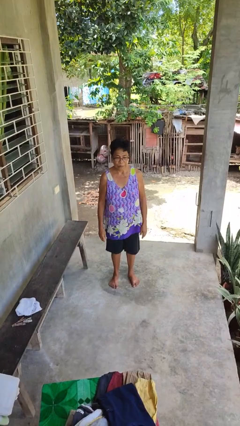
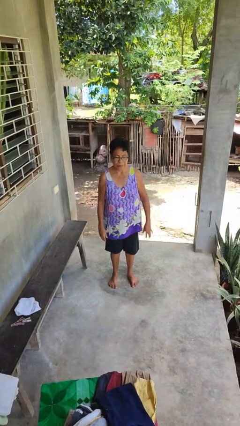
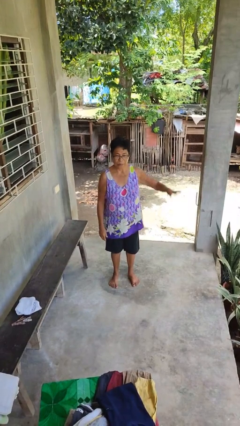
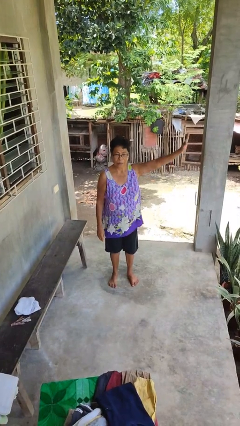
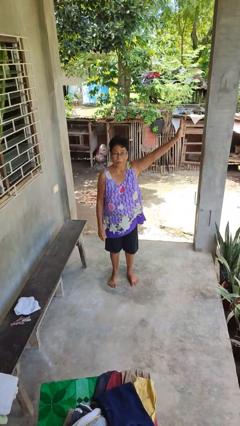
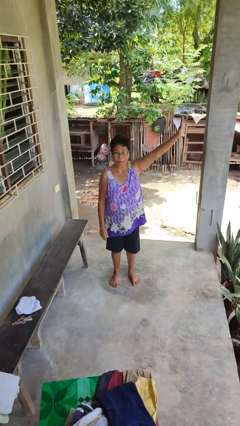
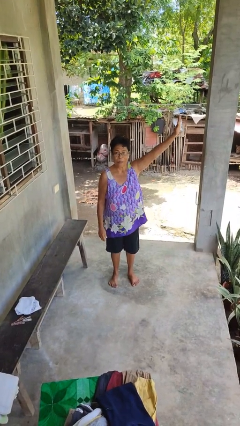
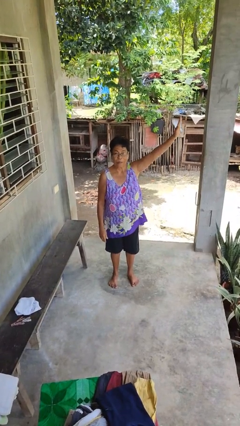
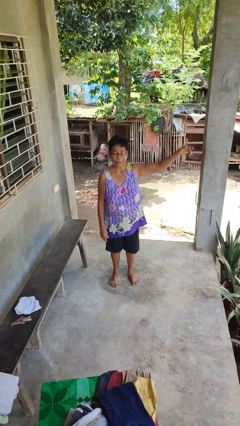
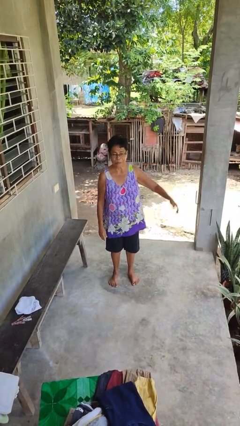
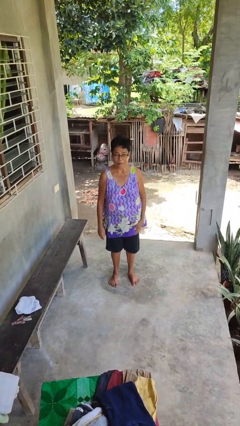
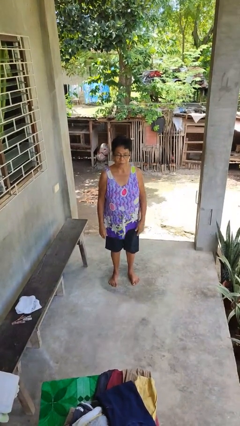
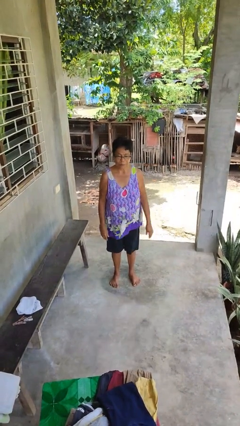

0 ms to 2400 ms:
person gestures stop

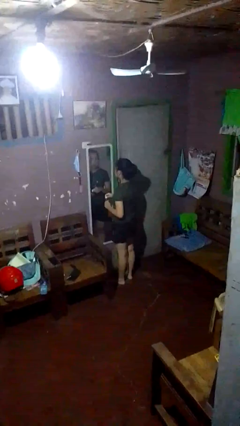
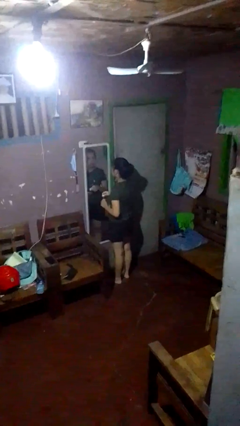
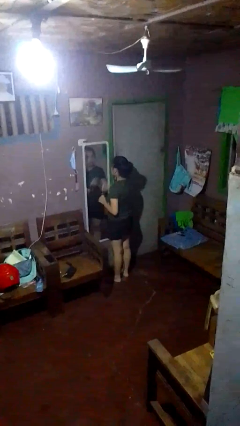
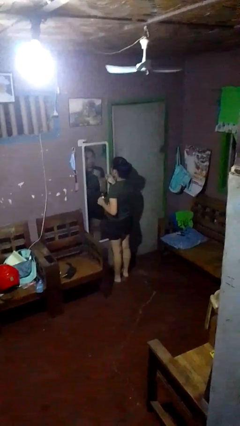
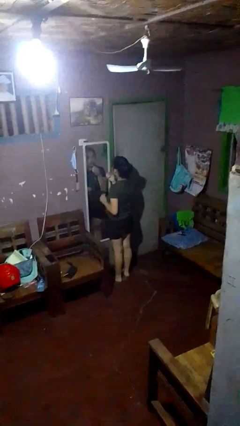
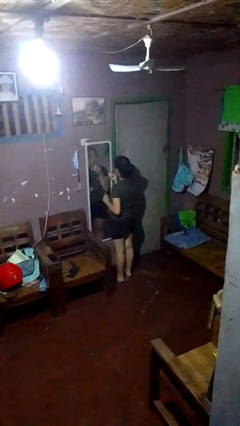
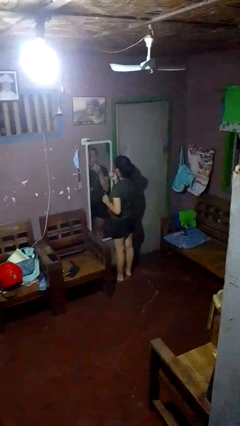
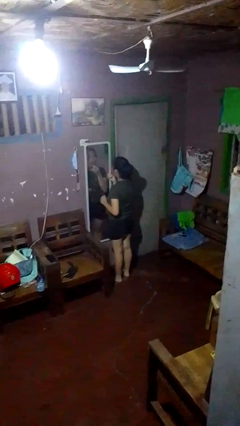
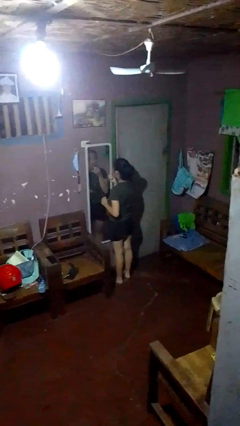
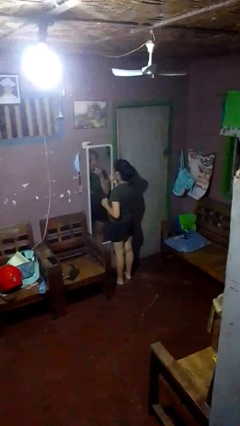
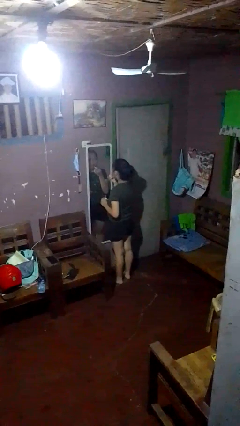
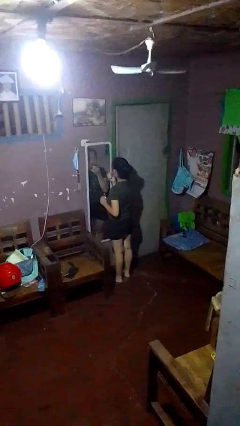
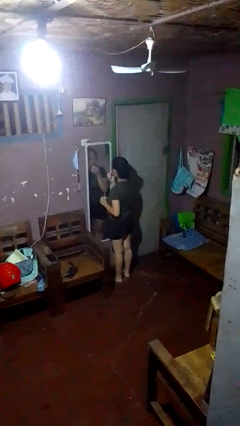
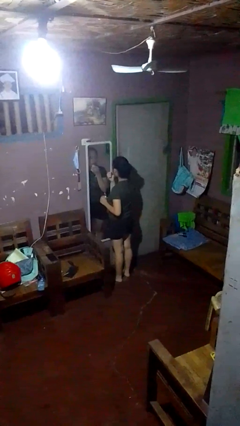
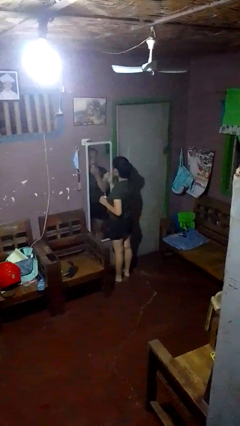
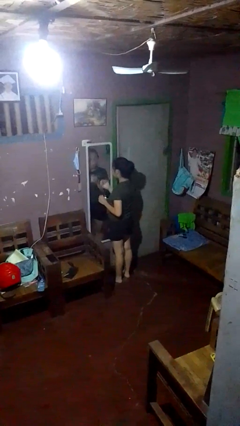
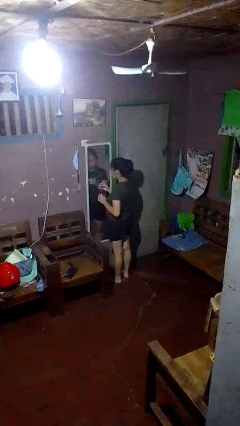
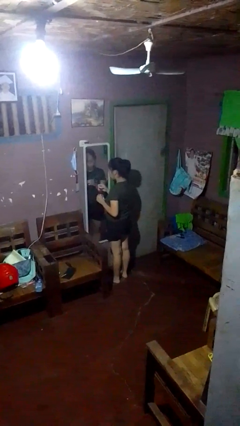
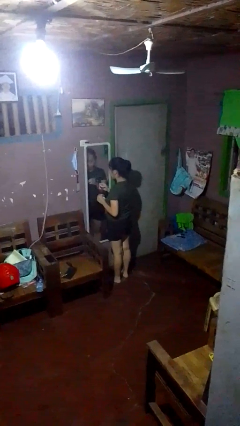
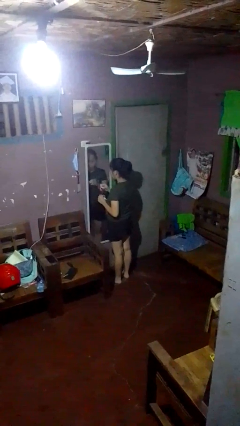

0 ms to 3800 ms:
person applies lip makeup

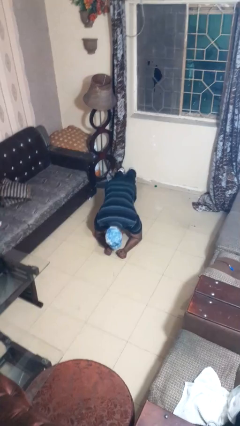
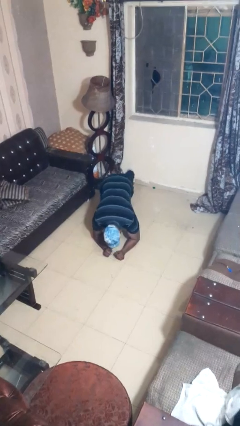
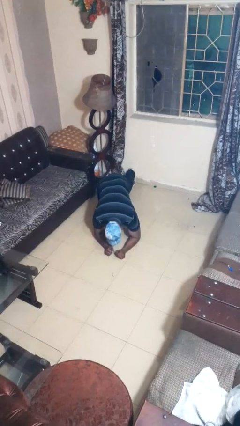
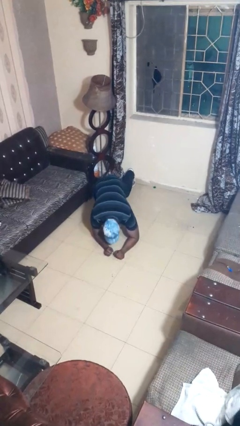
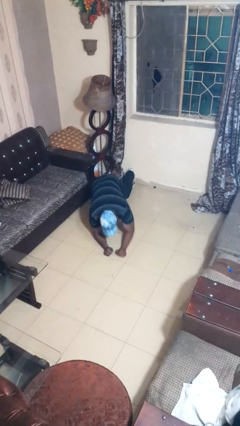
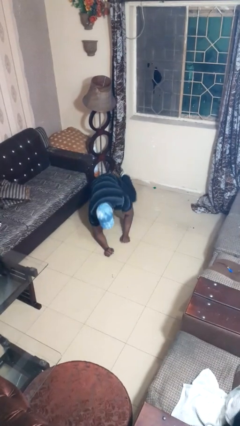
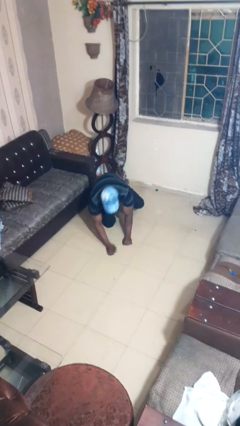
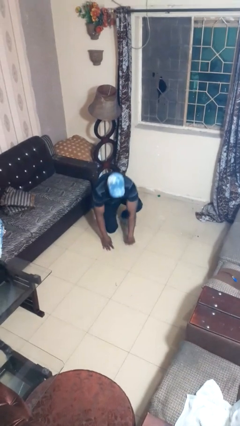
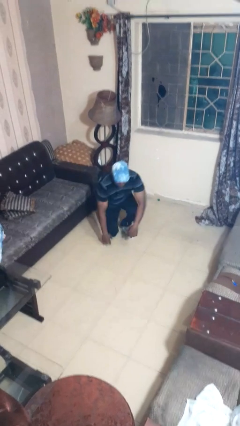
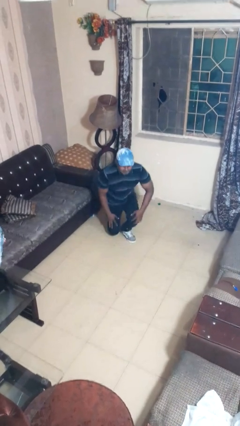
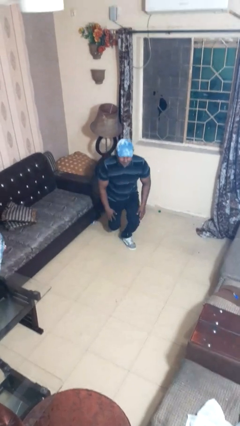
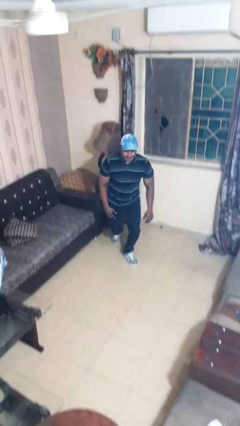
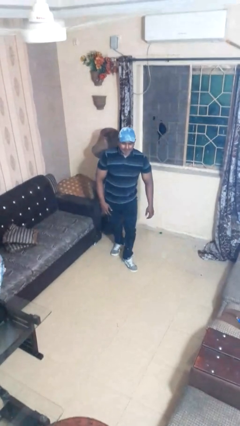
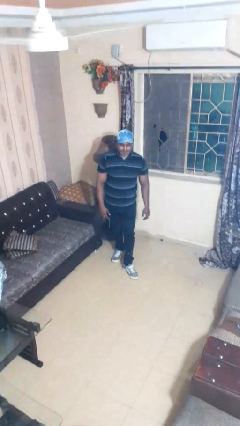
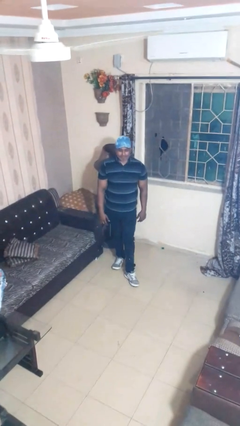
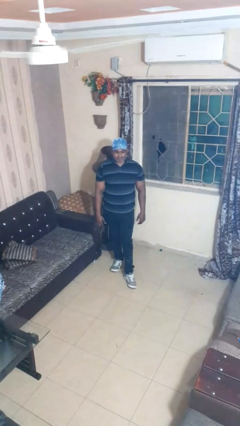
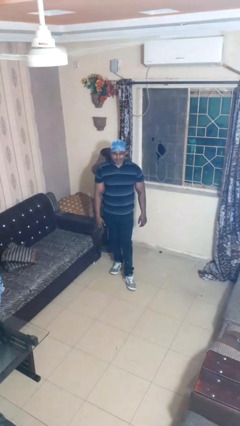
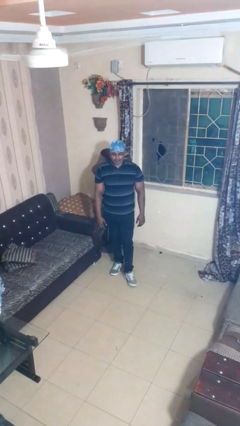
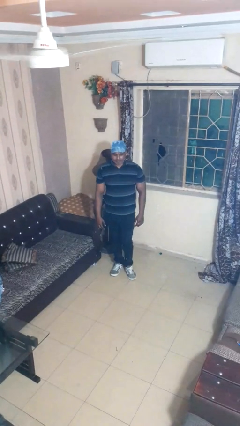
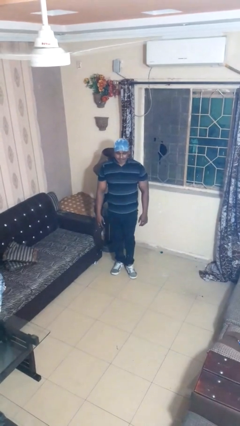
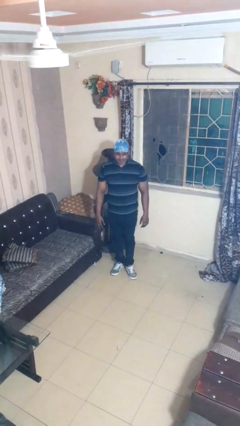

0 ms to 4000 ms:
person stands up from floor

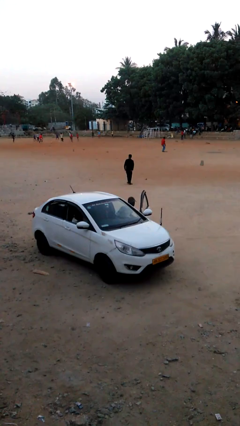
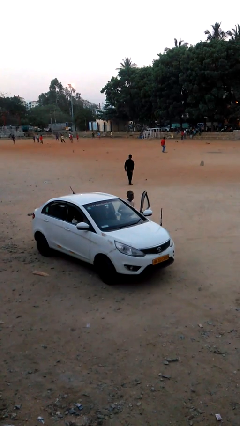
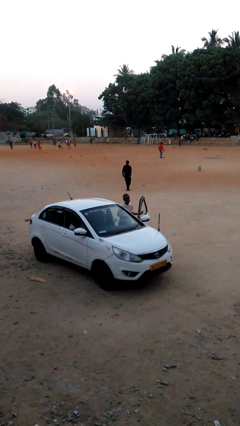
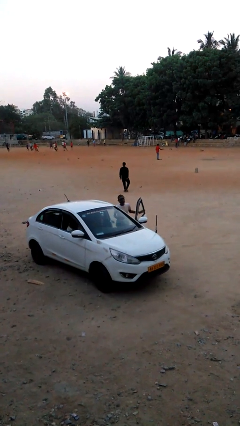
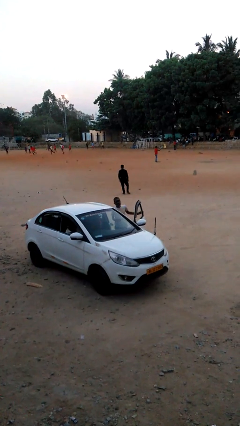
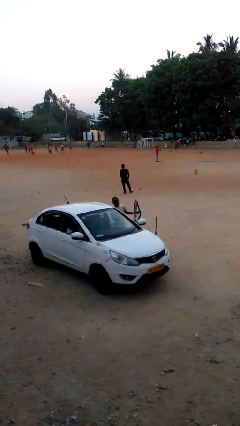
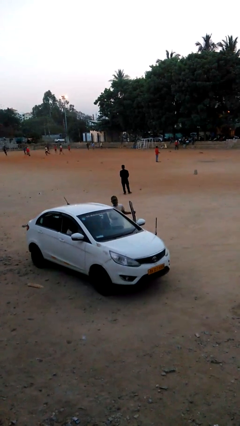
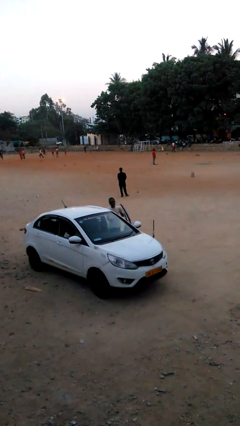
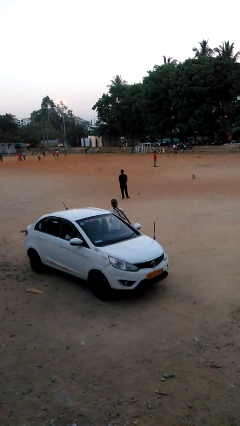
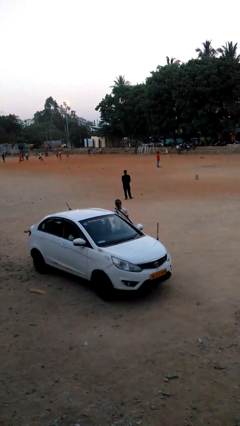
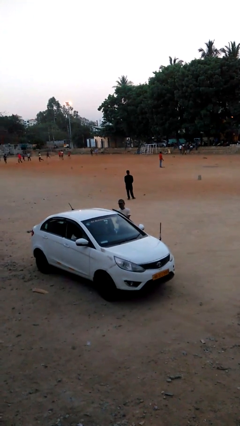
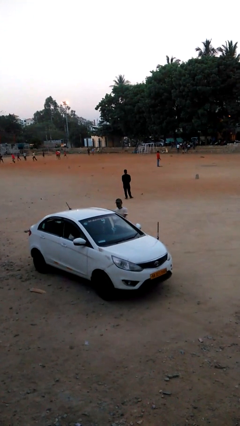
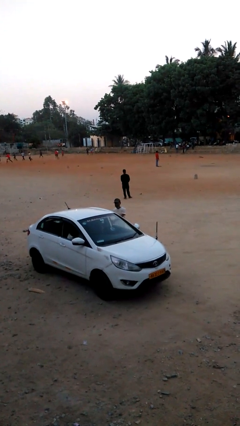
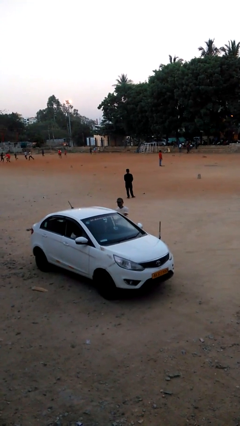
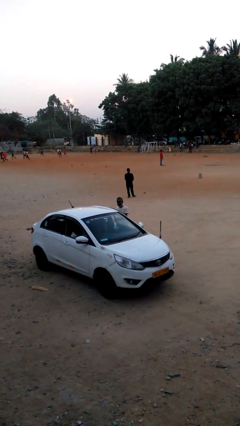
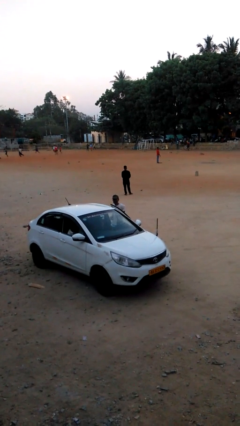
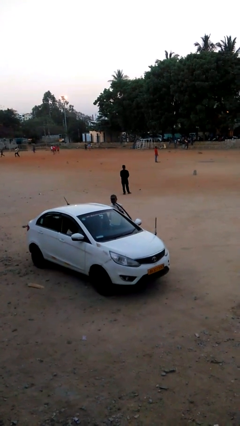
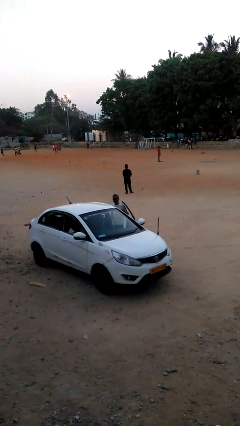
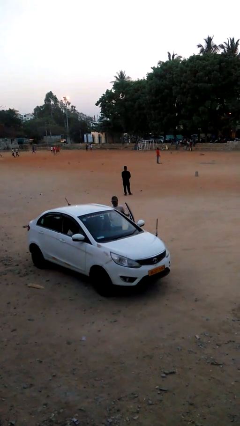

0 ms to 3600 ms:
person exits car

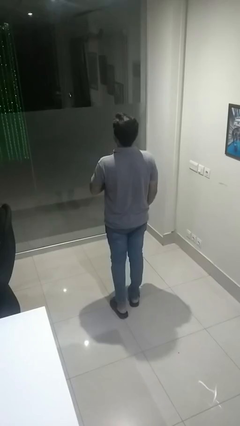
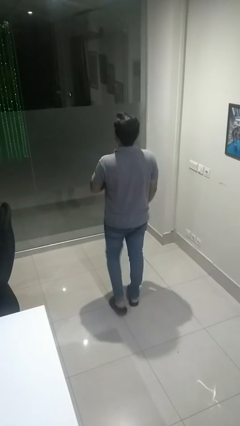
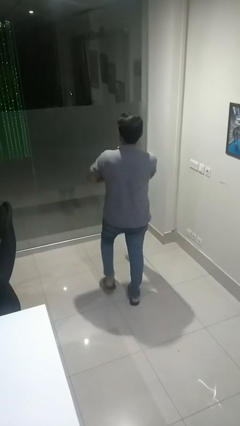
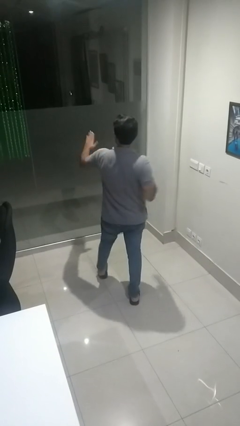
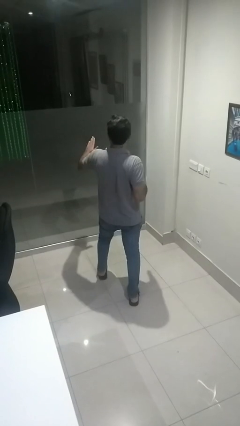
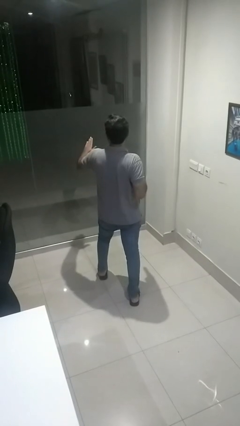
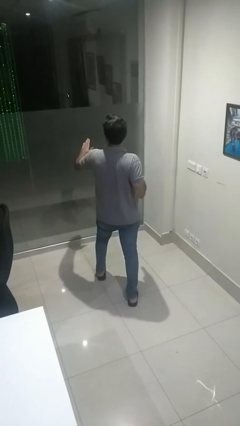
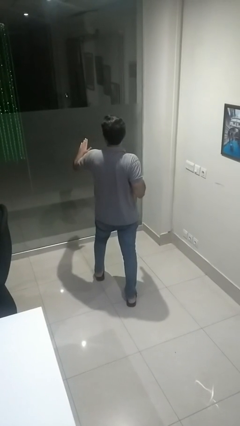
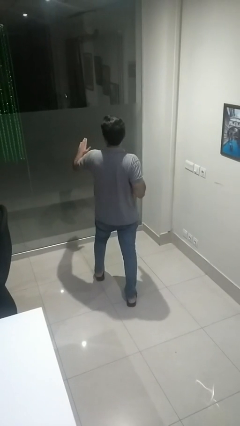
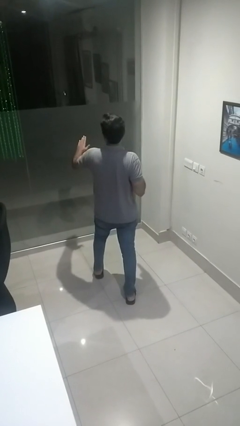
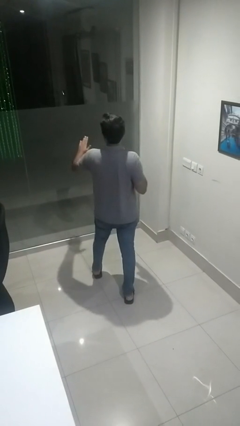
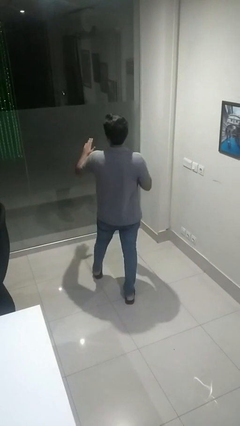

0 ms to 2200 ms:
person karate chop

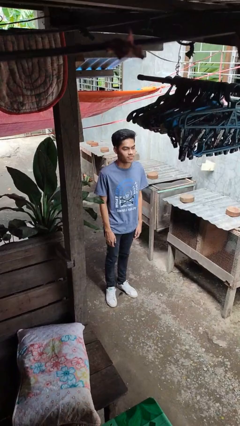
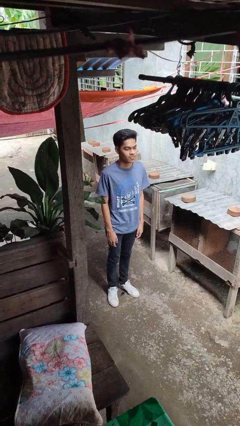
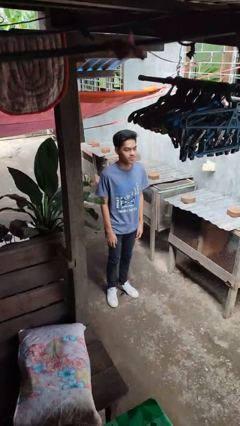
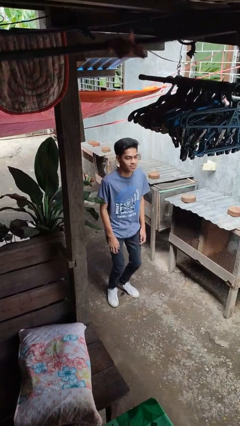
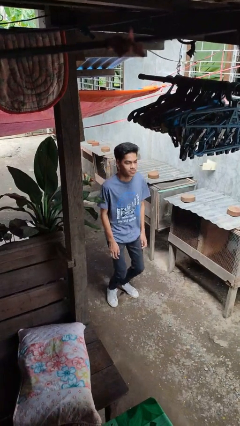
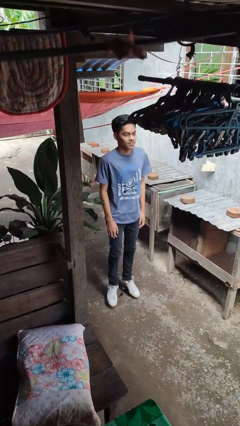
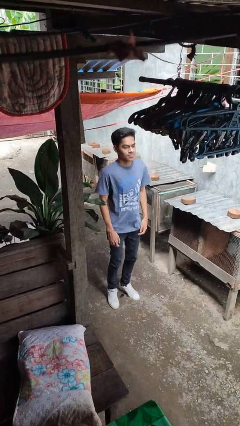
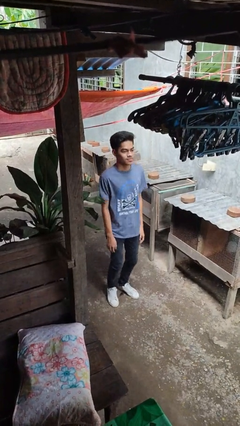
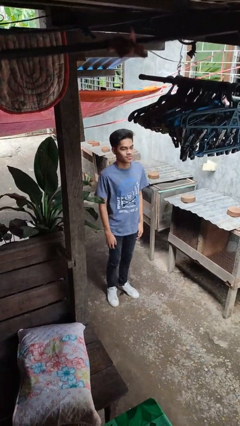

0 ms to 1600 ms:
person jumps
